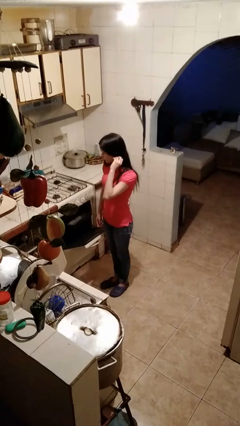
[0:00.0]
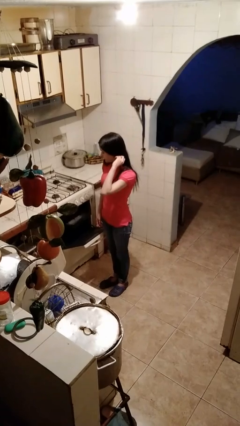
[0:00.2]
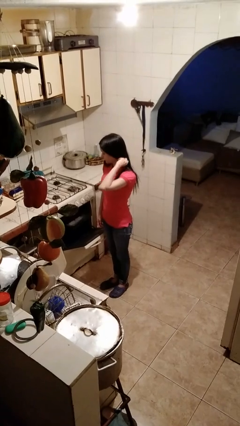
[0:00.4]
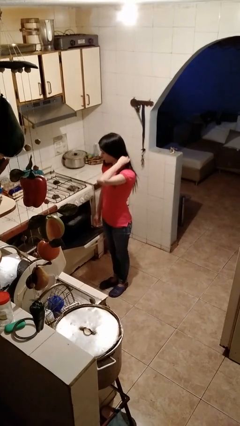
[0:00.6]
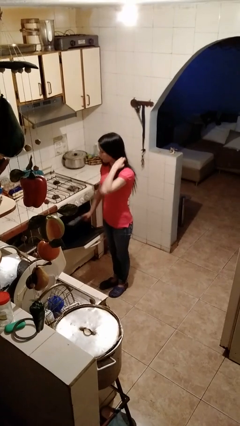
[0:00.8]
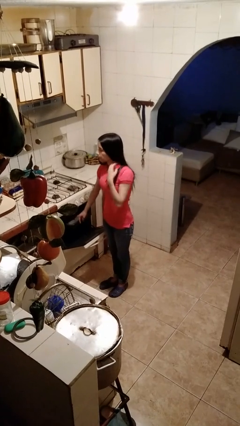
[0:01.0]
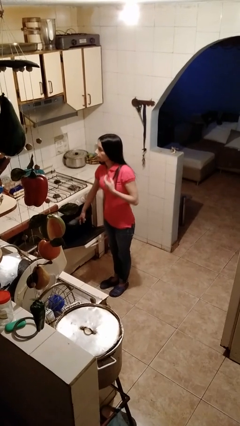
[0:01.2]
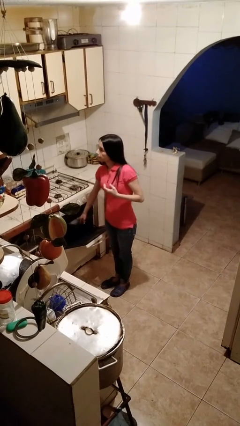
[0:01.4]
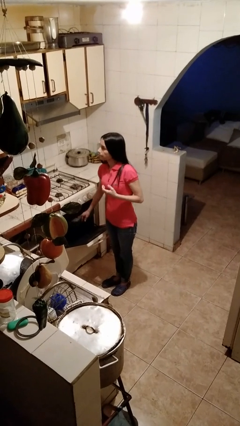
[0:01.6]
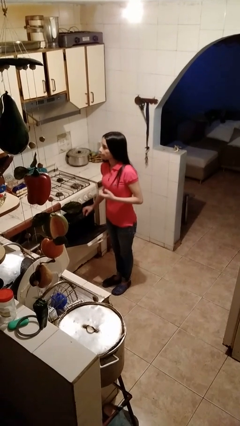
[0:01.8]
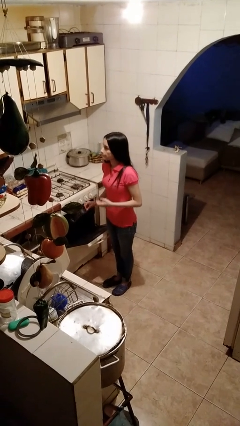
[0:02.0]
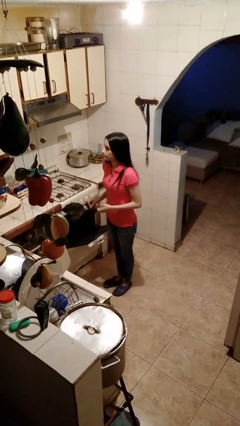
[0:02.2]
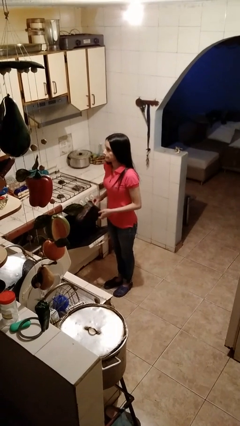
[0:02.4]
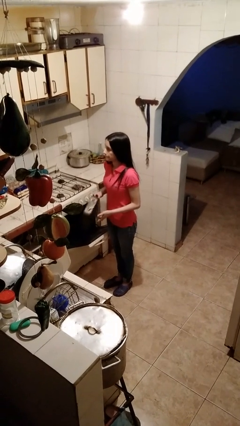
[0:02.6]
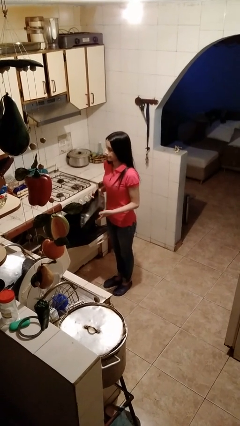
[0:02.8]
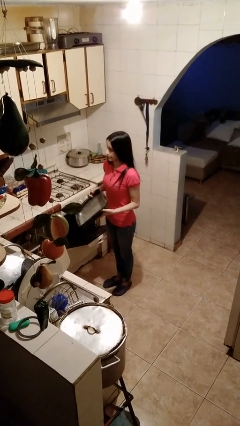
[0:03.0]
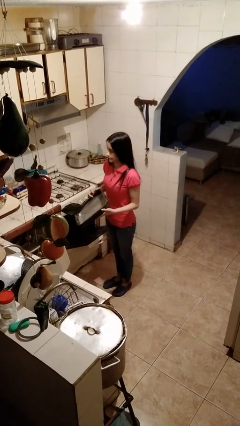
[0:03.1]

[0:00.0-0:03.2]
person takes object from oven

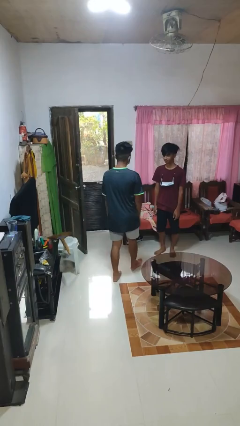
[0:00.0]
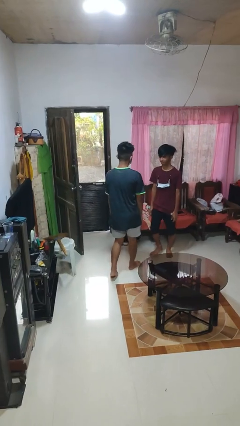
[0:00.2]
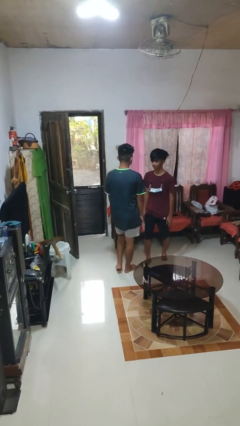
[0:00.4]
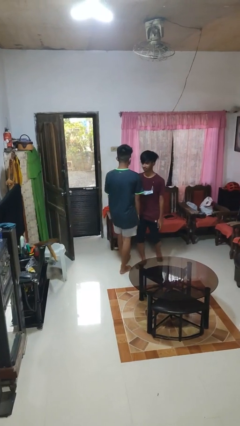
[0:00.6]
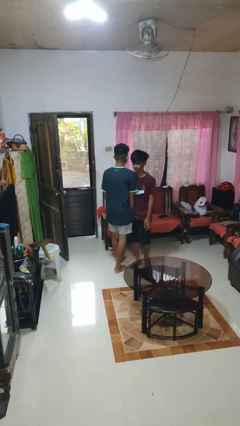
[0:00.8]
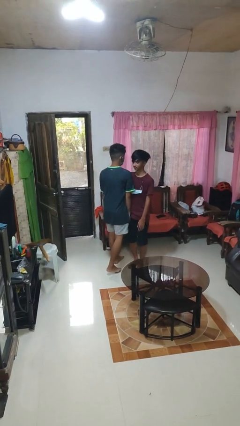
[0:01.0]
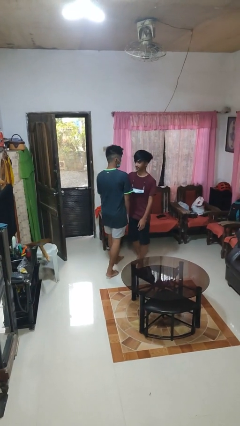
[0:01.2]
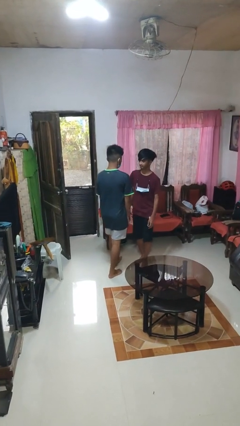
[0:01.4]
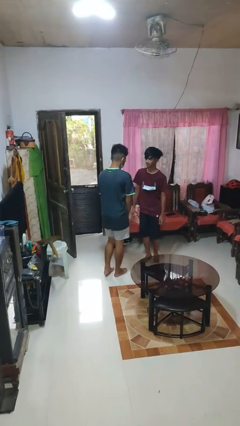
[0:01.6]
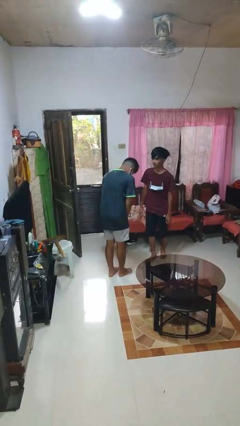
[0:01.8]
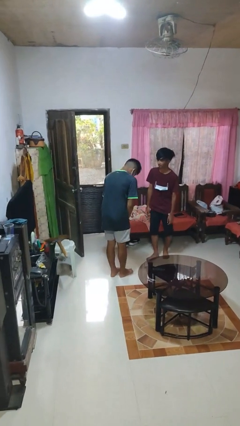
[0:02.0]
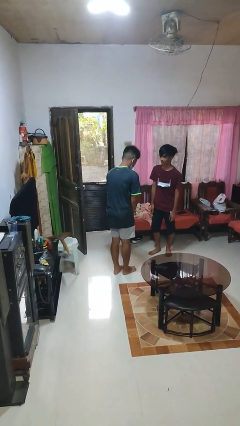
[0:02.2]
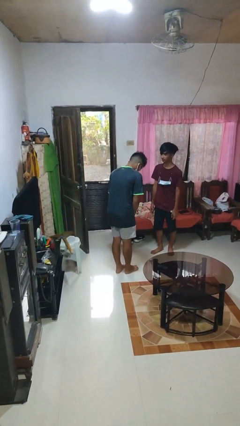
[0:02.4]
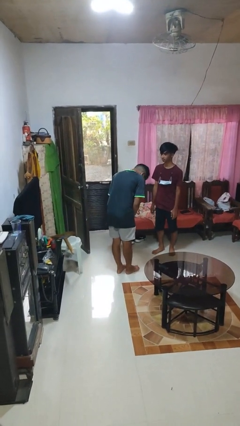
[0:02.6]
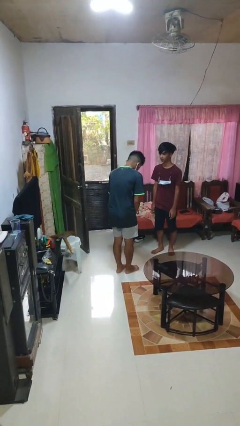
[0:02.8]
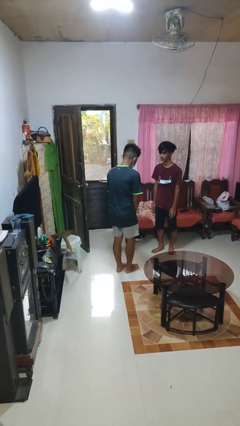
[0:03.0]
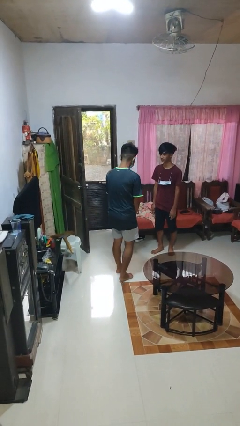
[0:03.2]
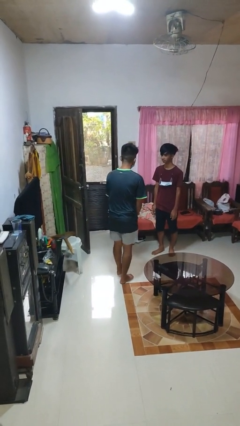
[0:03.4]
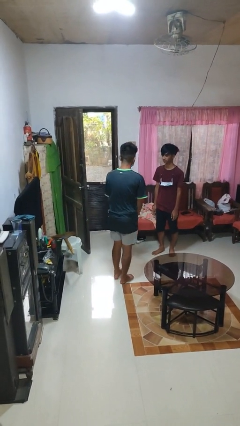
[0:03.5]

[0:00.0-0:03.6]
person bumps into person

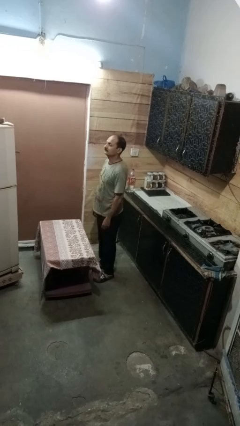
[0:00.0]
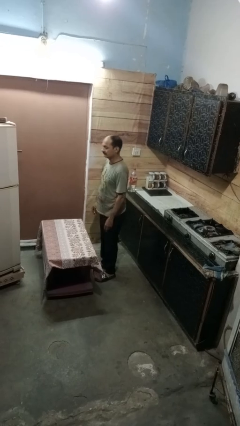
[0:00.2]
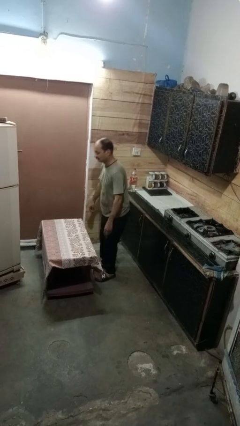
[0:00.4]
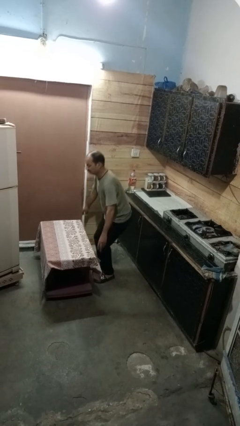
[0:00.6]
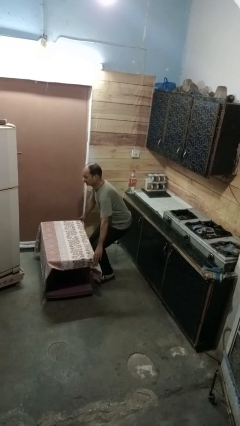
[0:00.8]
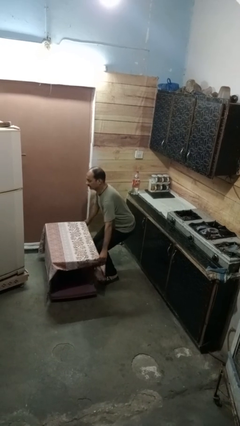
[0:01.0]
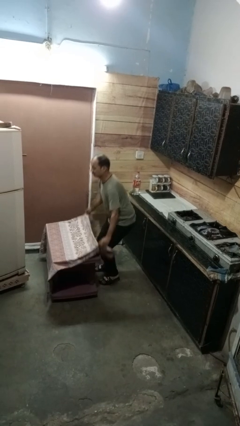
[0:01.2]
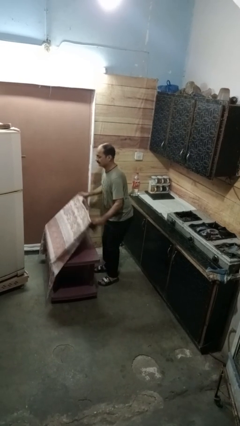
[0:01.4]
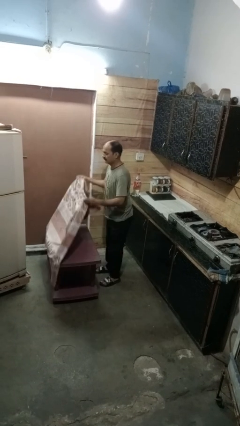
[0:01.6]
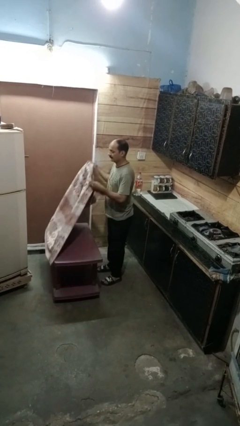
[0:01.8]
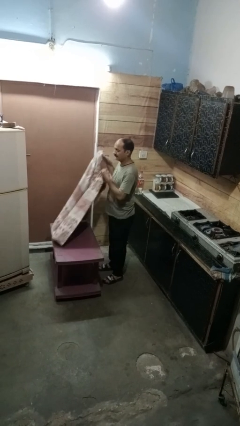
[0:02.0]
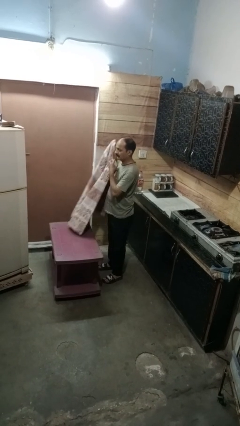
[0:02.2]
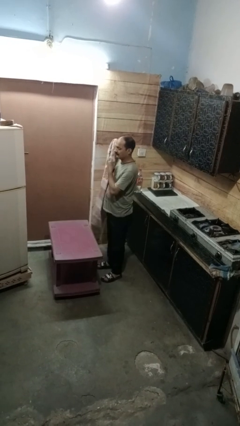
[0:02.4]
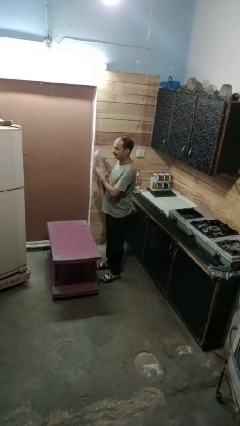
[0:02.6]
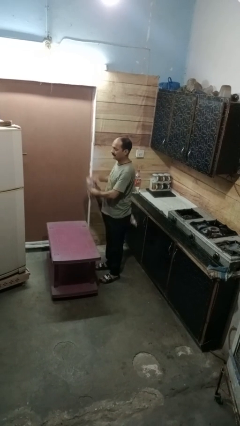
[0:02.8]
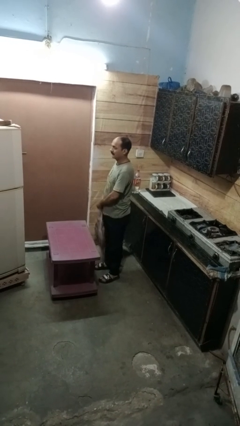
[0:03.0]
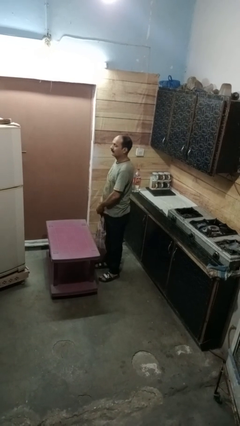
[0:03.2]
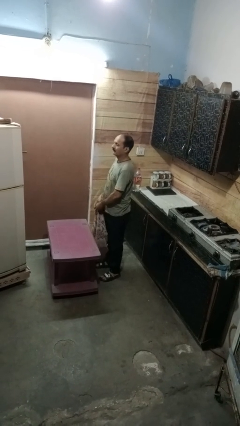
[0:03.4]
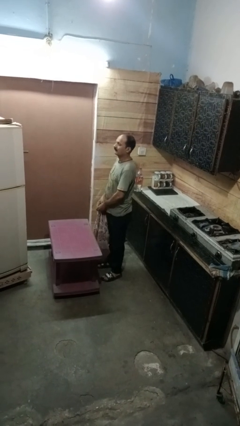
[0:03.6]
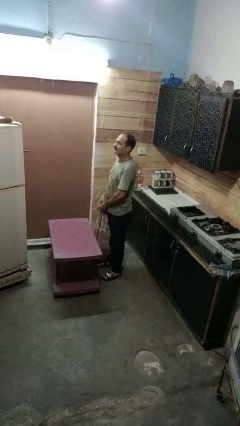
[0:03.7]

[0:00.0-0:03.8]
person folds tablecloth

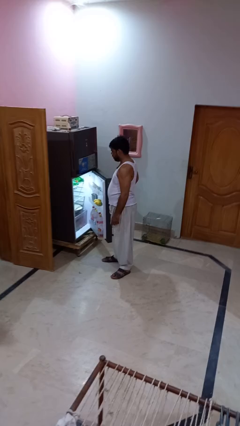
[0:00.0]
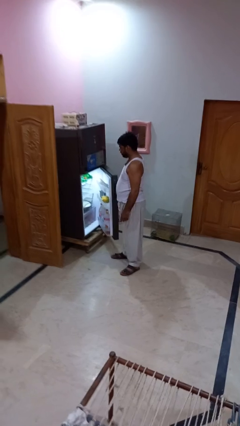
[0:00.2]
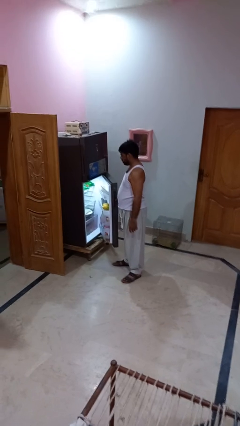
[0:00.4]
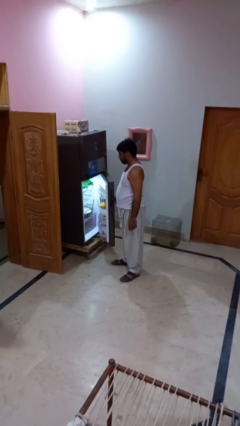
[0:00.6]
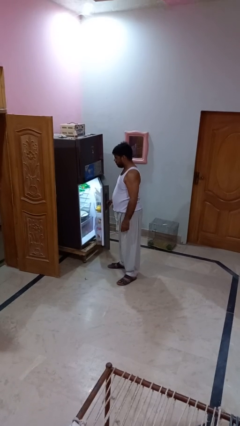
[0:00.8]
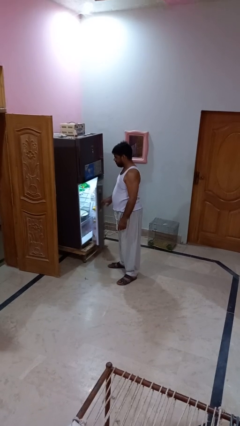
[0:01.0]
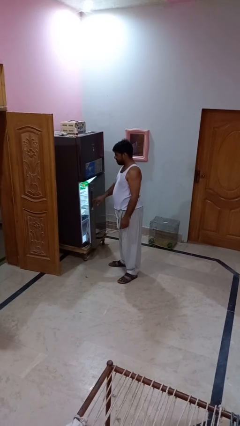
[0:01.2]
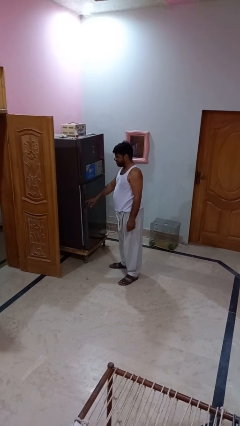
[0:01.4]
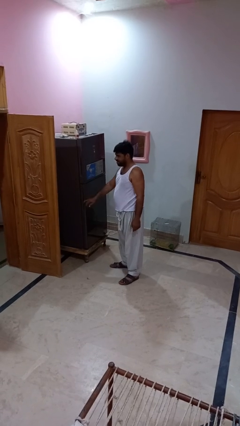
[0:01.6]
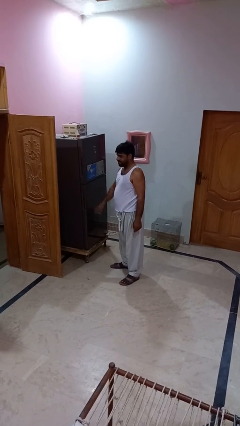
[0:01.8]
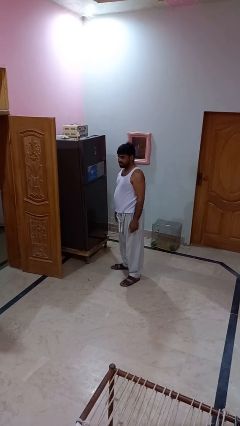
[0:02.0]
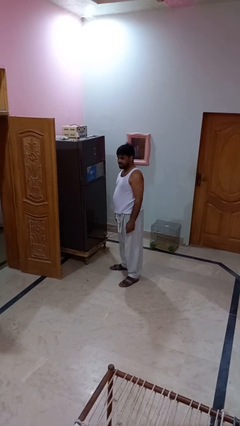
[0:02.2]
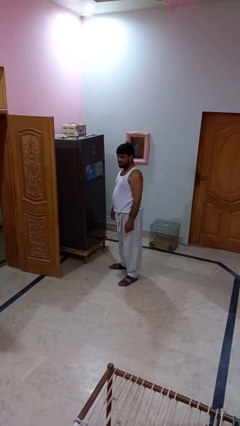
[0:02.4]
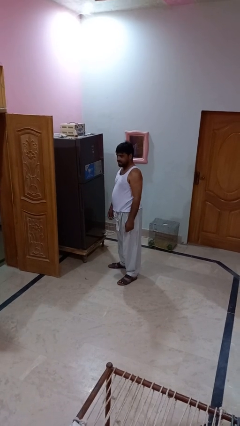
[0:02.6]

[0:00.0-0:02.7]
person closes refrigerator

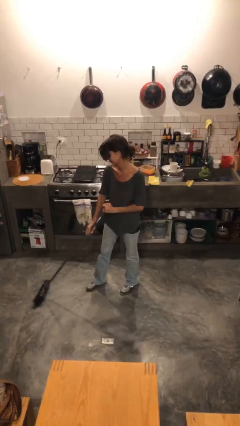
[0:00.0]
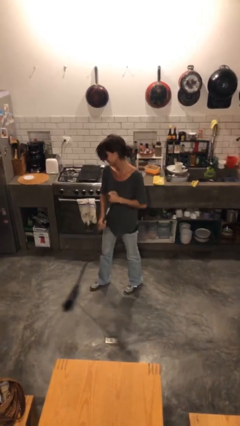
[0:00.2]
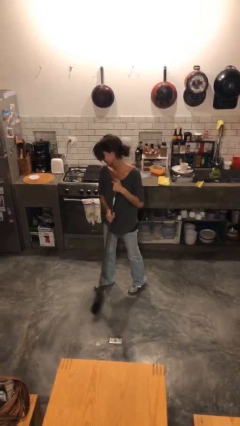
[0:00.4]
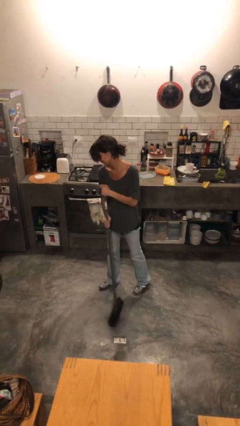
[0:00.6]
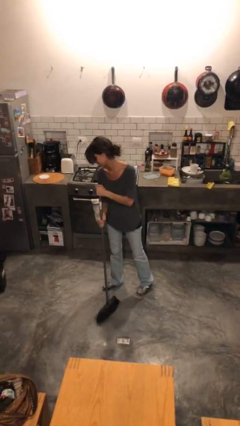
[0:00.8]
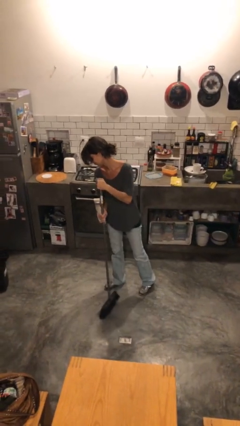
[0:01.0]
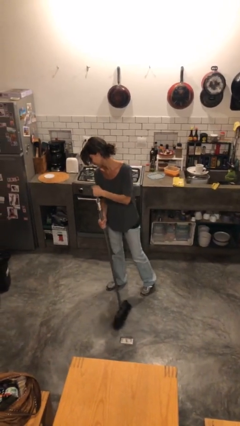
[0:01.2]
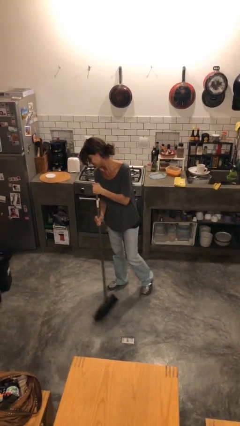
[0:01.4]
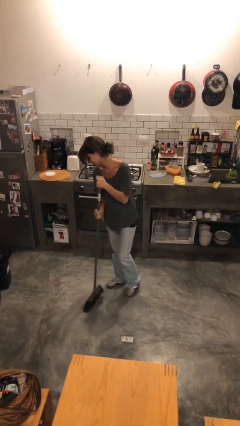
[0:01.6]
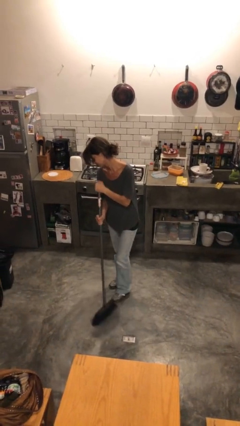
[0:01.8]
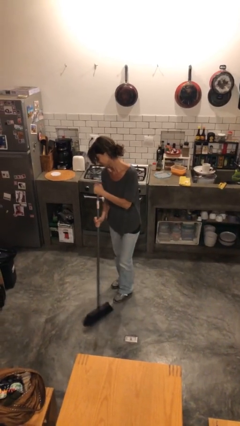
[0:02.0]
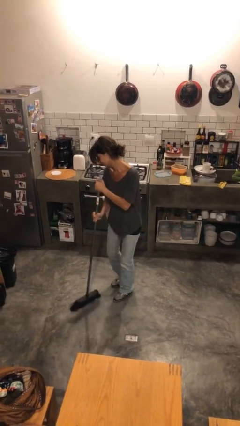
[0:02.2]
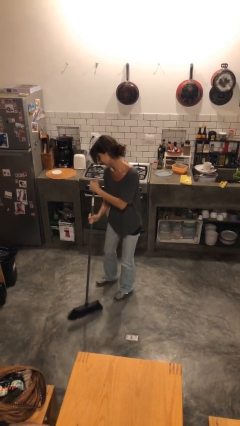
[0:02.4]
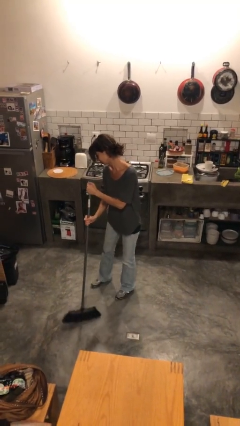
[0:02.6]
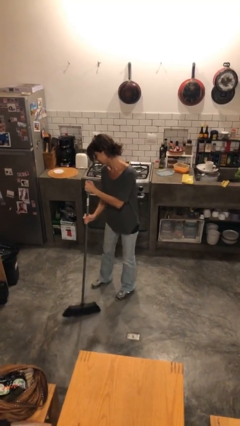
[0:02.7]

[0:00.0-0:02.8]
person sweeps floor

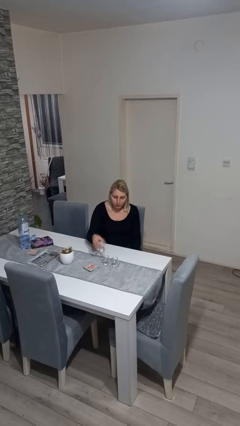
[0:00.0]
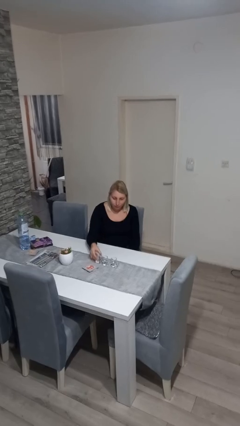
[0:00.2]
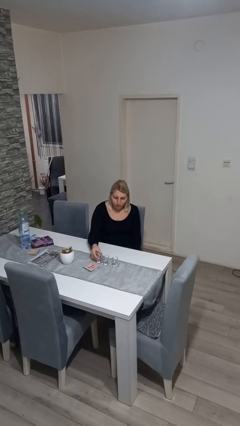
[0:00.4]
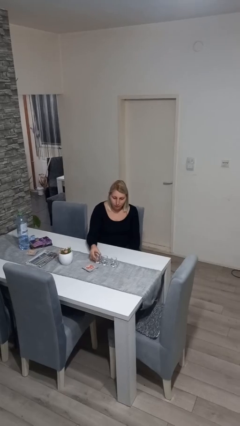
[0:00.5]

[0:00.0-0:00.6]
person puts down object on table

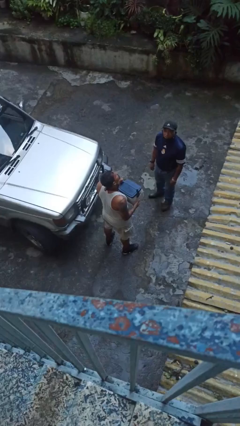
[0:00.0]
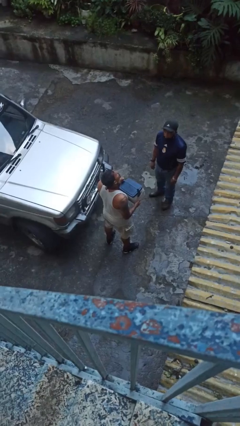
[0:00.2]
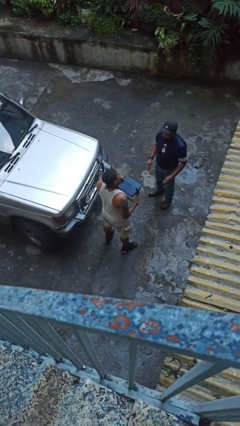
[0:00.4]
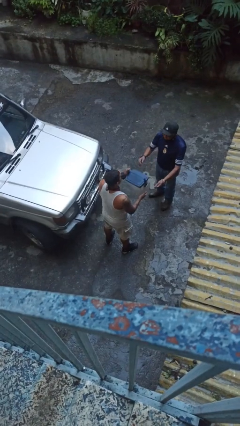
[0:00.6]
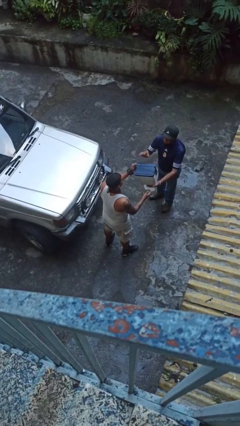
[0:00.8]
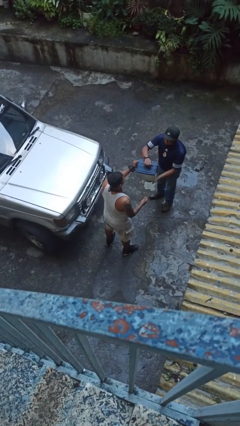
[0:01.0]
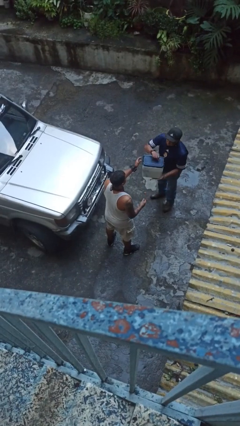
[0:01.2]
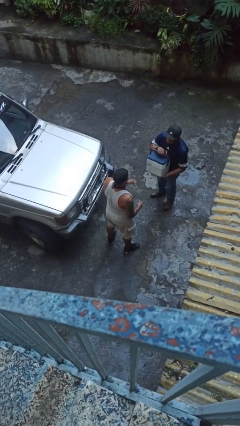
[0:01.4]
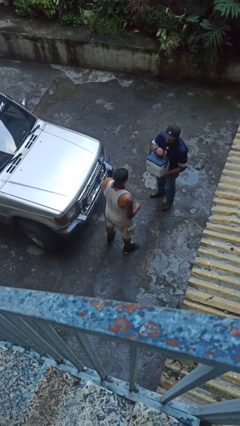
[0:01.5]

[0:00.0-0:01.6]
person transfers object to person
